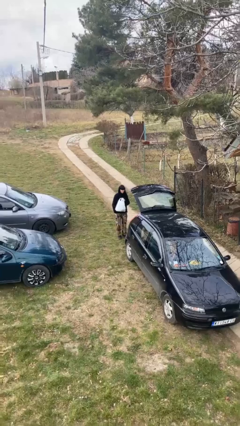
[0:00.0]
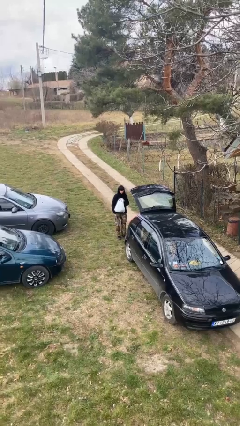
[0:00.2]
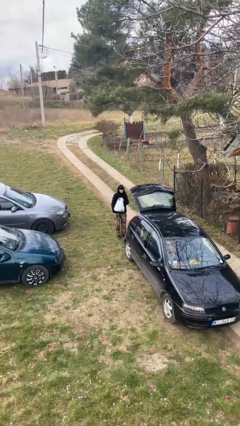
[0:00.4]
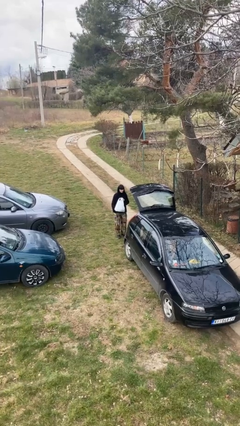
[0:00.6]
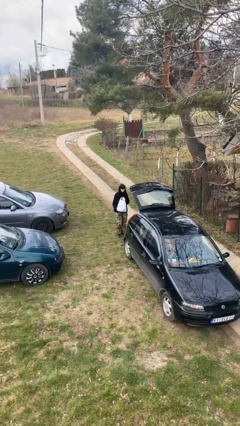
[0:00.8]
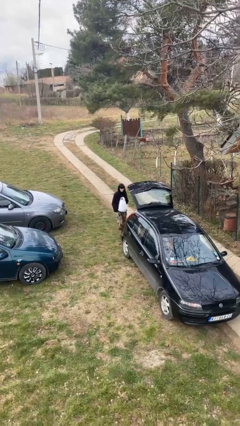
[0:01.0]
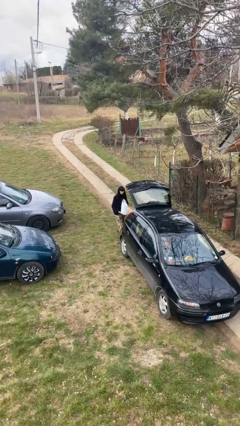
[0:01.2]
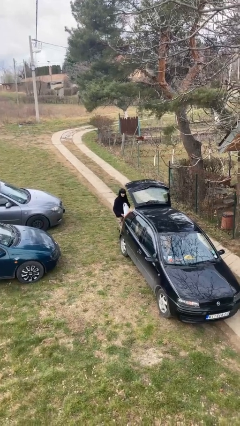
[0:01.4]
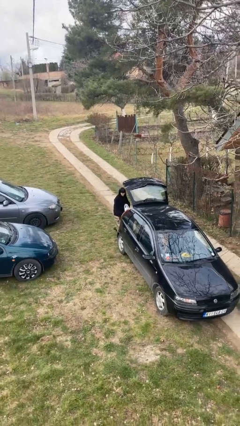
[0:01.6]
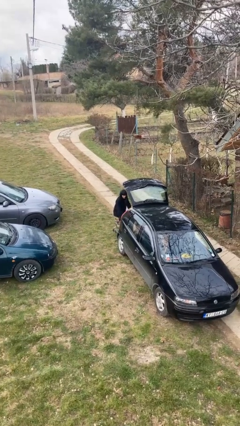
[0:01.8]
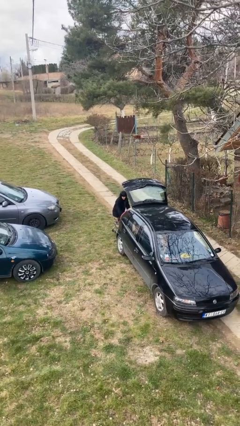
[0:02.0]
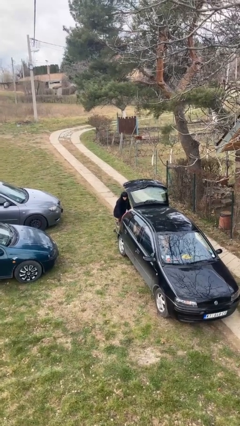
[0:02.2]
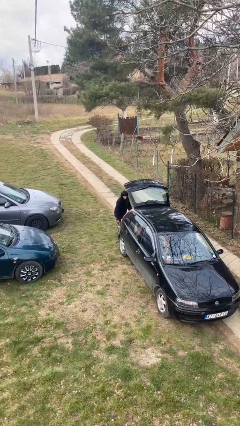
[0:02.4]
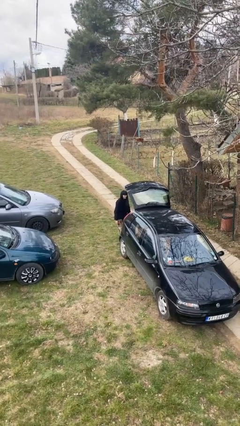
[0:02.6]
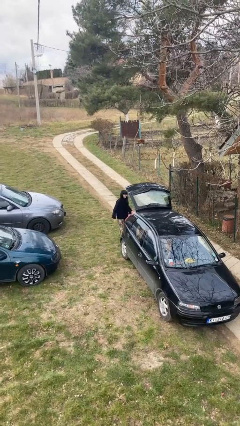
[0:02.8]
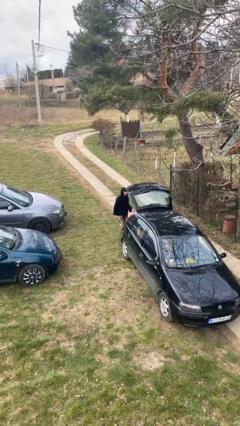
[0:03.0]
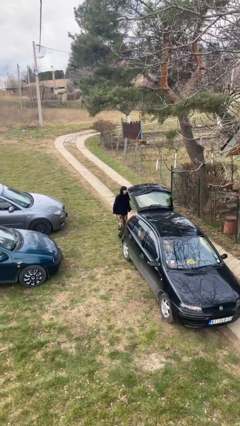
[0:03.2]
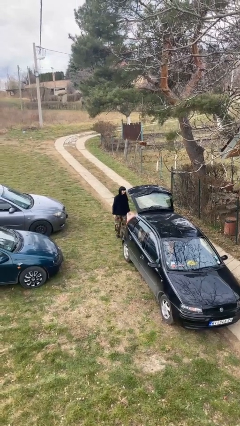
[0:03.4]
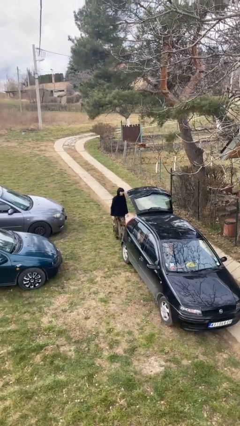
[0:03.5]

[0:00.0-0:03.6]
person loads car

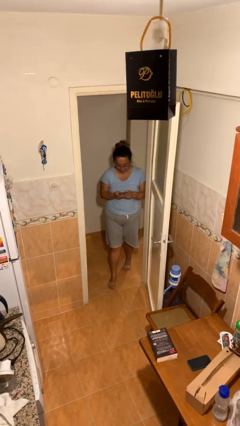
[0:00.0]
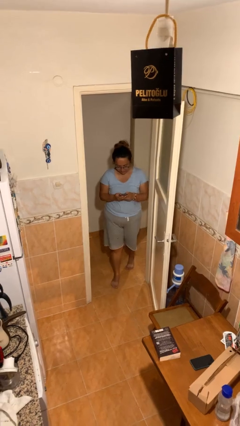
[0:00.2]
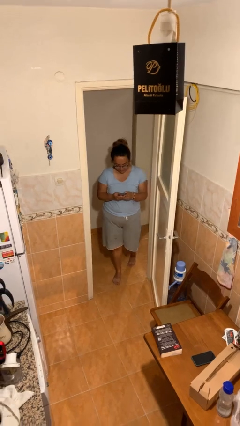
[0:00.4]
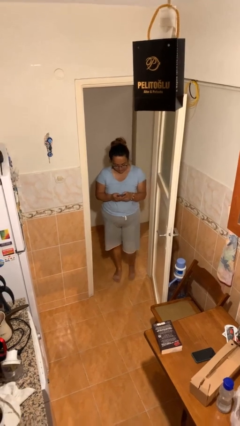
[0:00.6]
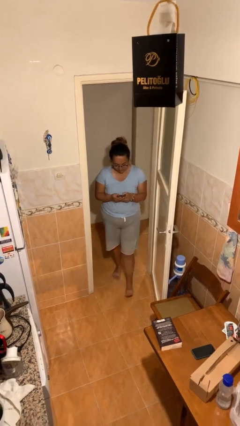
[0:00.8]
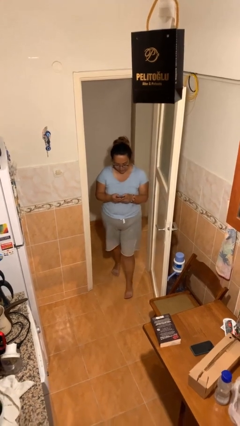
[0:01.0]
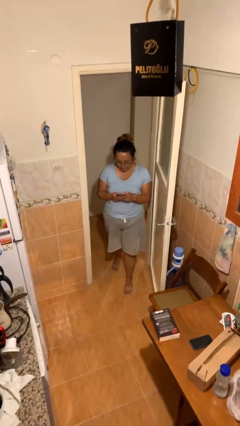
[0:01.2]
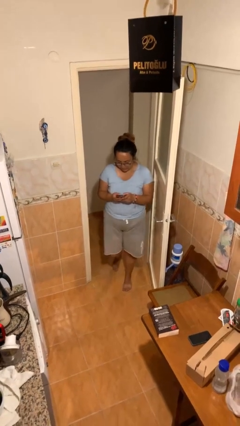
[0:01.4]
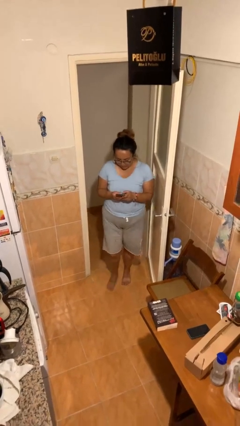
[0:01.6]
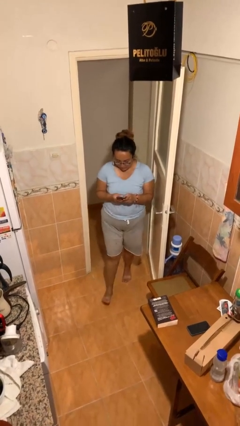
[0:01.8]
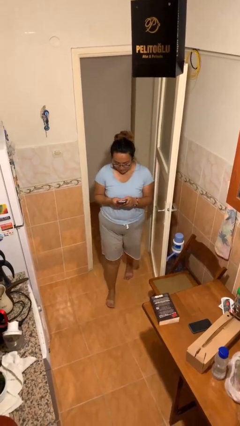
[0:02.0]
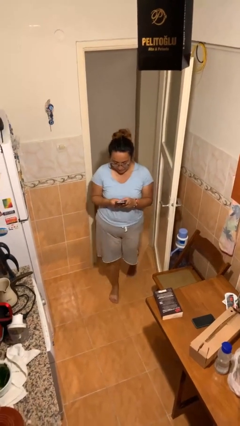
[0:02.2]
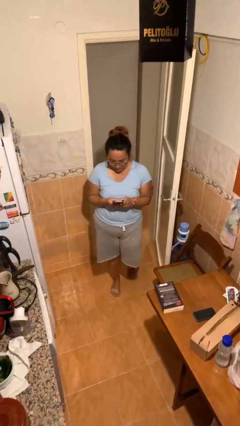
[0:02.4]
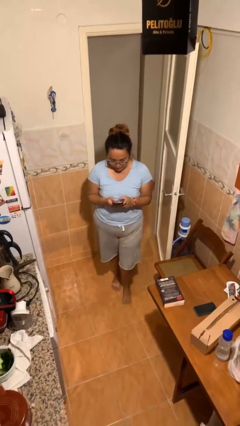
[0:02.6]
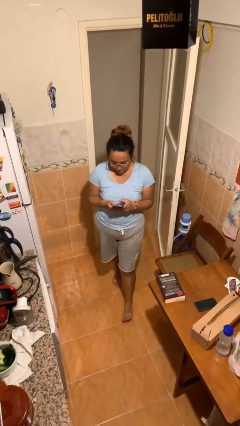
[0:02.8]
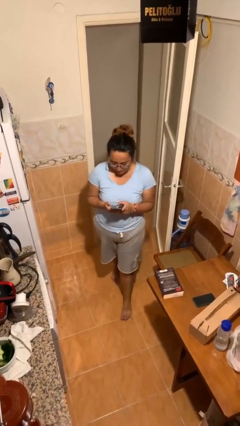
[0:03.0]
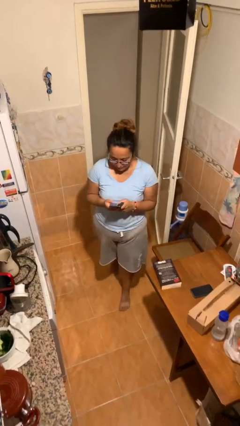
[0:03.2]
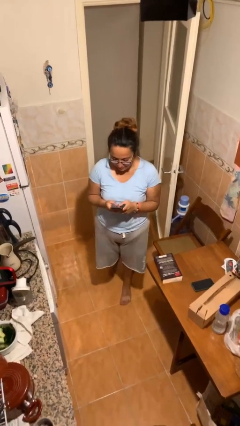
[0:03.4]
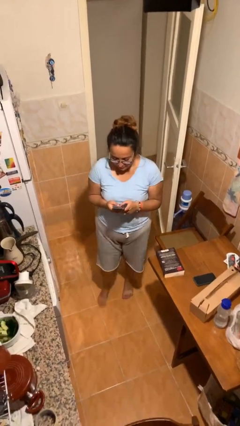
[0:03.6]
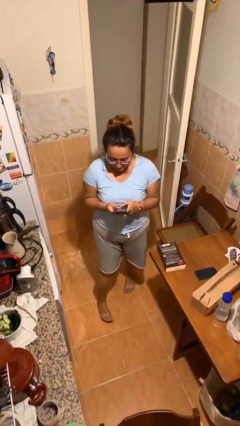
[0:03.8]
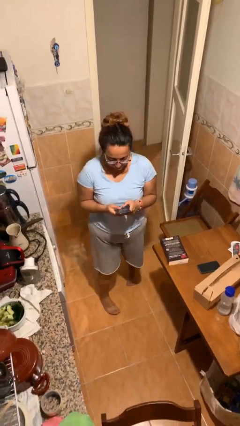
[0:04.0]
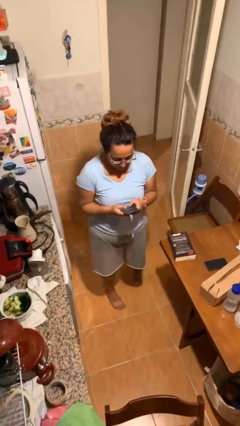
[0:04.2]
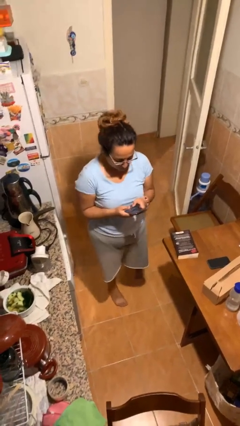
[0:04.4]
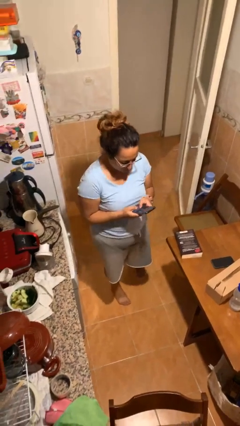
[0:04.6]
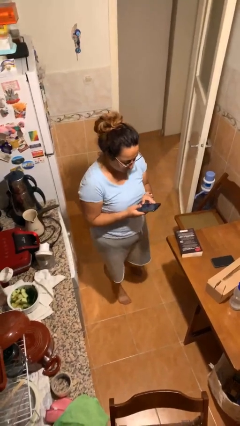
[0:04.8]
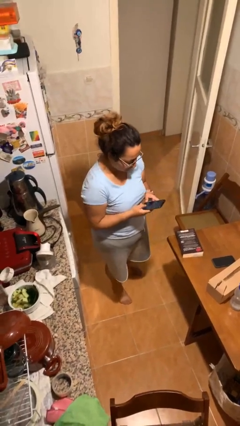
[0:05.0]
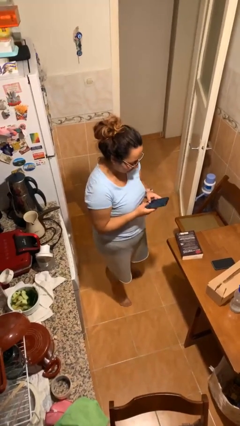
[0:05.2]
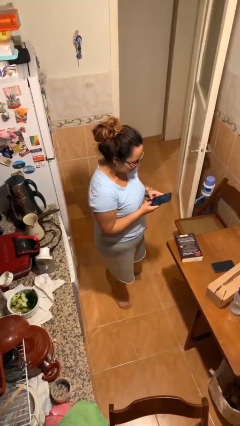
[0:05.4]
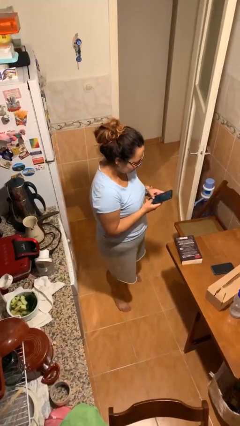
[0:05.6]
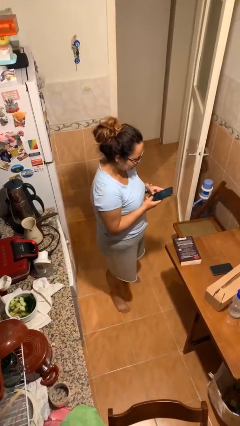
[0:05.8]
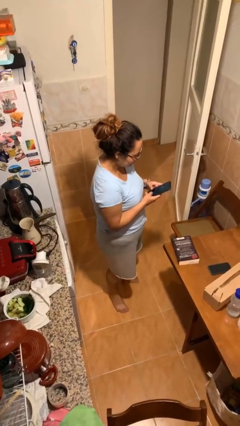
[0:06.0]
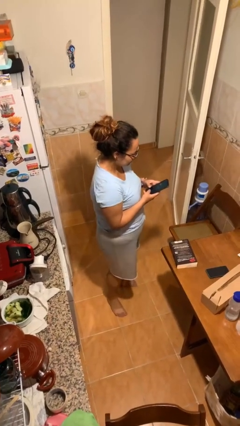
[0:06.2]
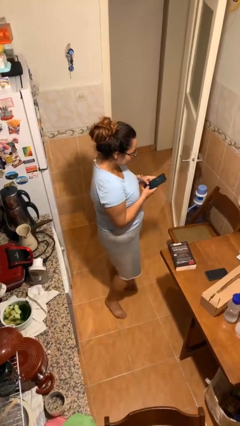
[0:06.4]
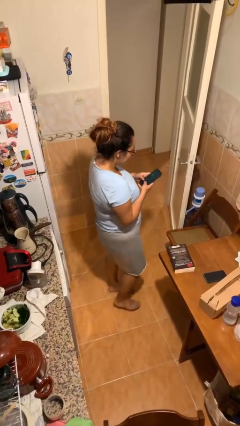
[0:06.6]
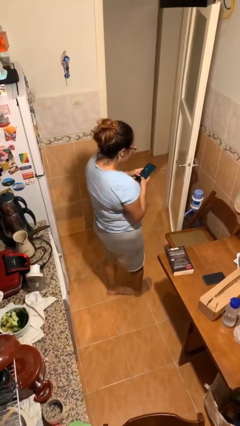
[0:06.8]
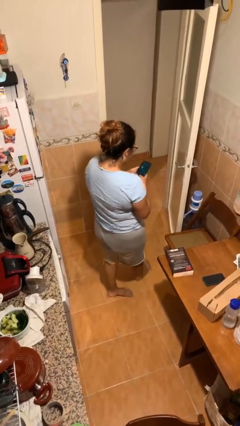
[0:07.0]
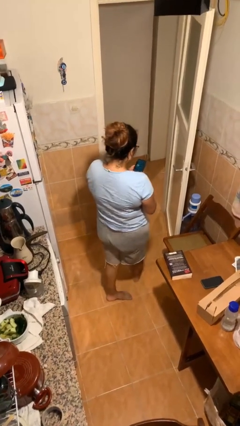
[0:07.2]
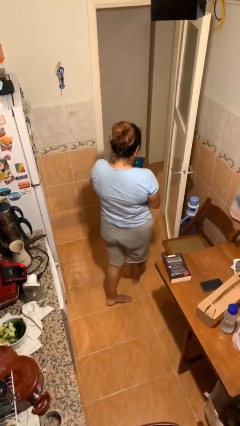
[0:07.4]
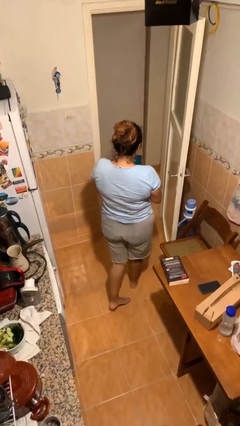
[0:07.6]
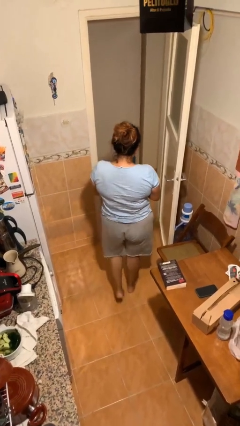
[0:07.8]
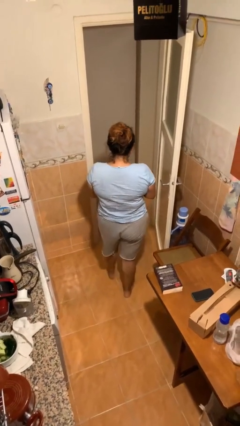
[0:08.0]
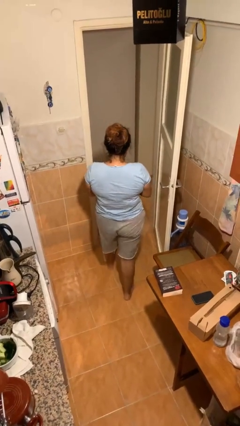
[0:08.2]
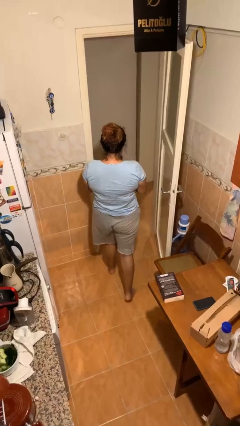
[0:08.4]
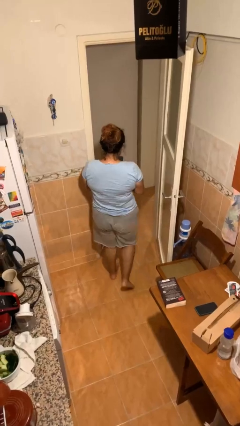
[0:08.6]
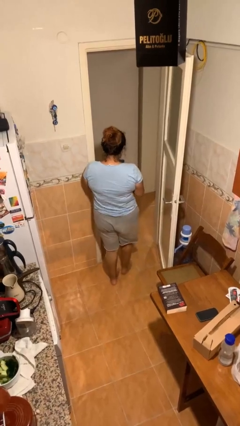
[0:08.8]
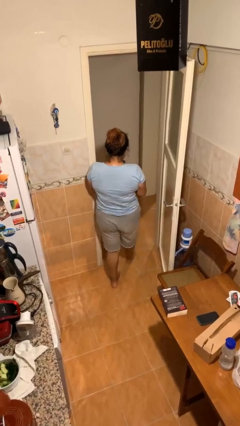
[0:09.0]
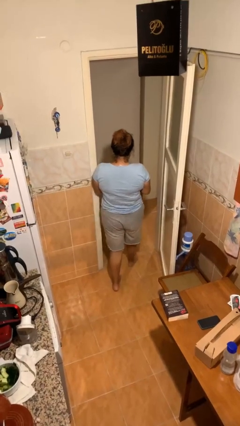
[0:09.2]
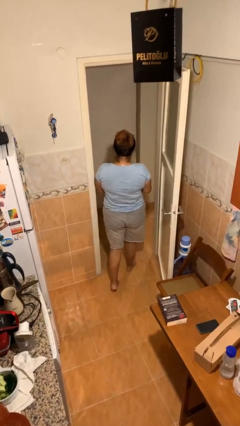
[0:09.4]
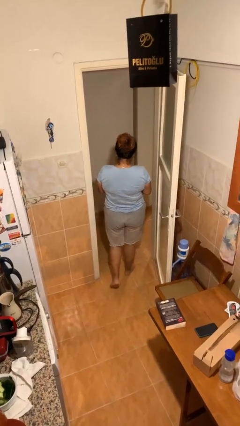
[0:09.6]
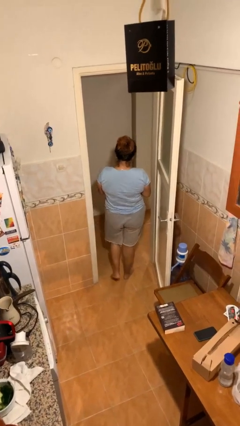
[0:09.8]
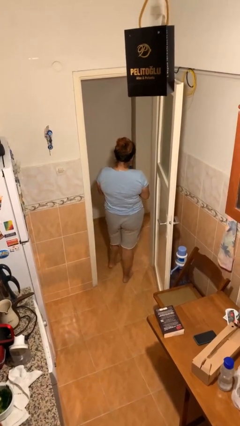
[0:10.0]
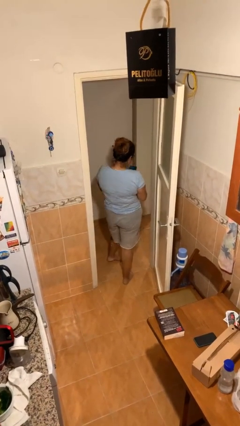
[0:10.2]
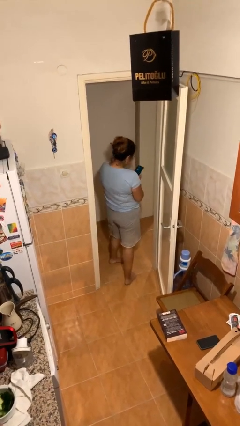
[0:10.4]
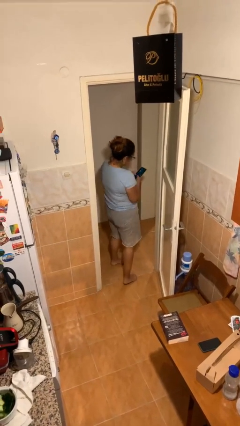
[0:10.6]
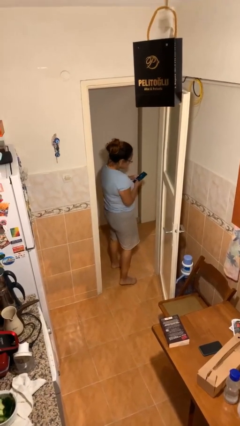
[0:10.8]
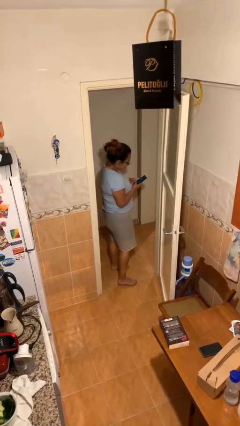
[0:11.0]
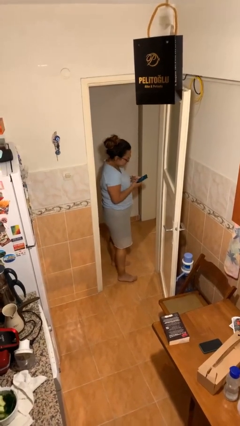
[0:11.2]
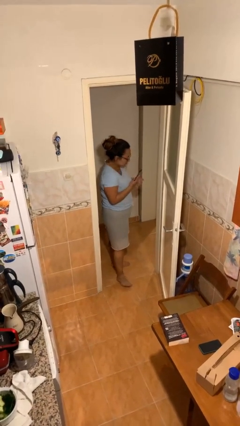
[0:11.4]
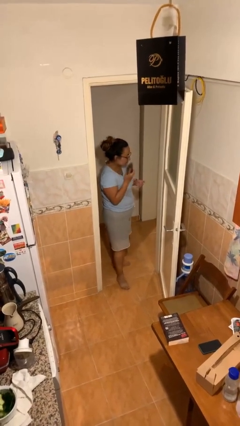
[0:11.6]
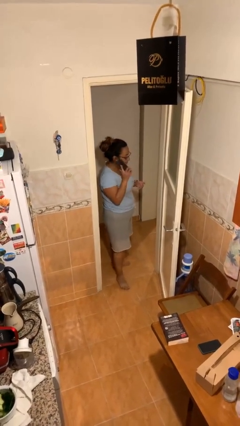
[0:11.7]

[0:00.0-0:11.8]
person texts on phone

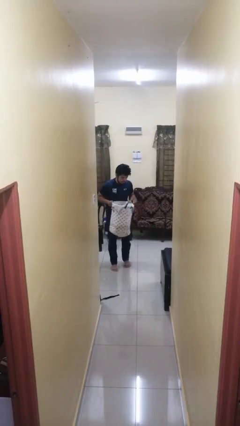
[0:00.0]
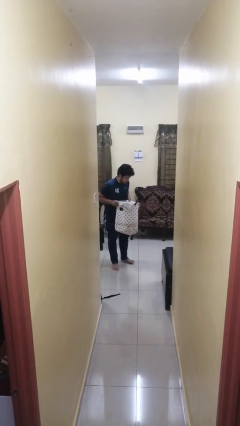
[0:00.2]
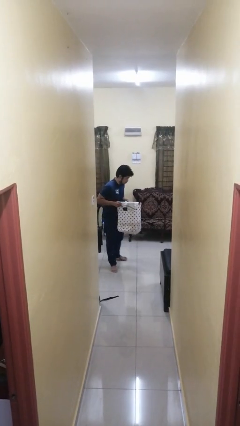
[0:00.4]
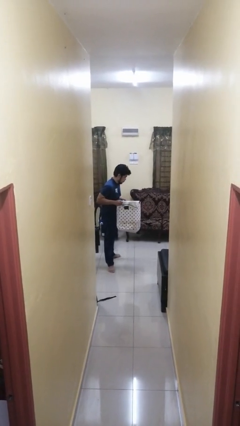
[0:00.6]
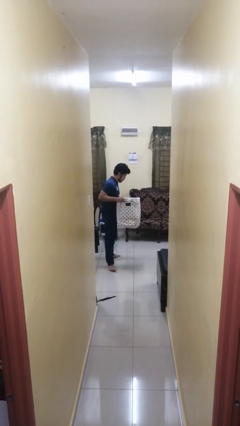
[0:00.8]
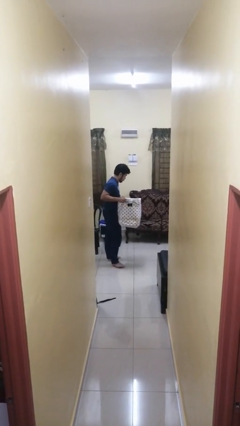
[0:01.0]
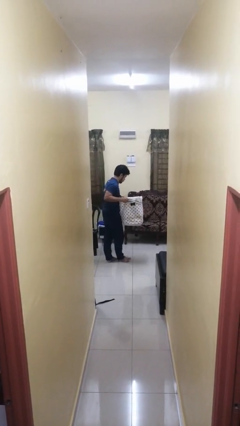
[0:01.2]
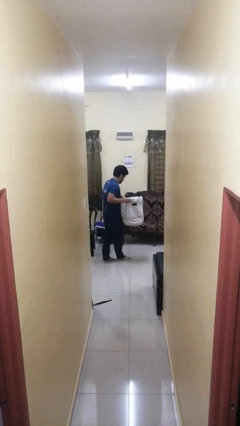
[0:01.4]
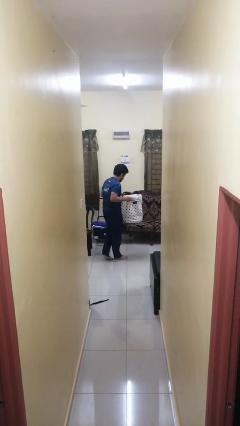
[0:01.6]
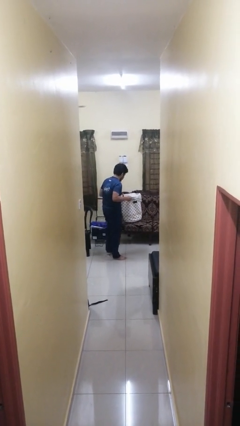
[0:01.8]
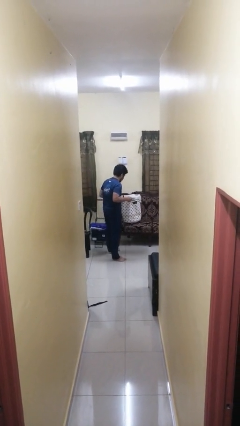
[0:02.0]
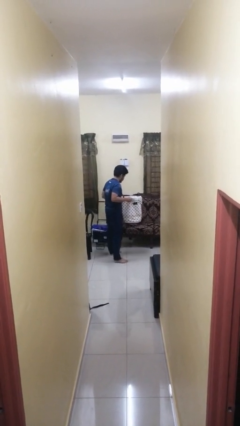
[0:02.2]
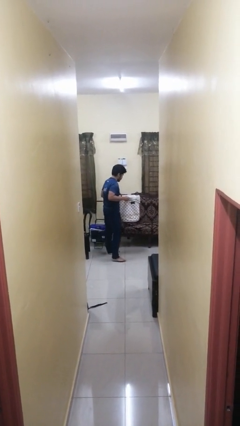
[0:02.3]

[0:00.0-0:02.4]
person carries laundry basket

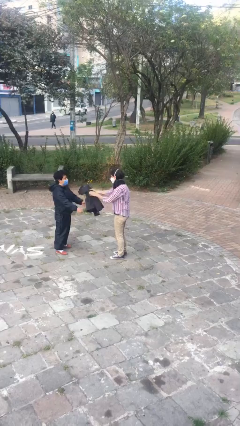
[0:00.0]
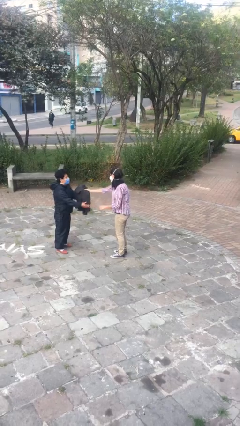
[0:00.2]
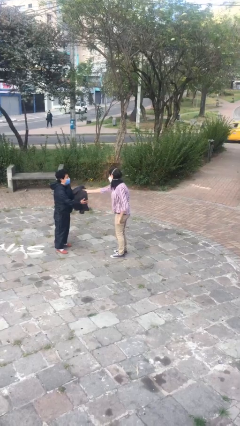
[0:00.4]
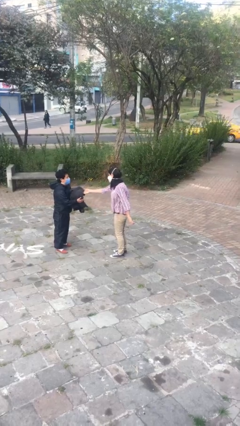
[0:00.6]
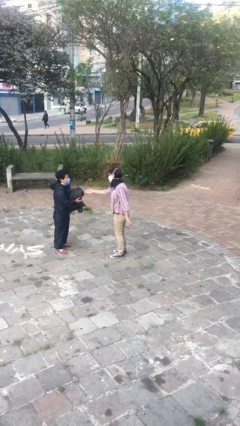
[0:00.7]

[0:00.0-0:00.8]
person transfers object to person
